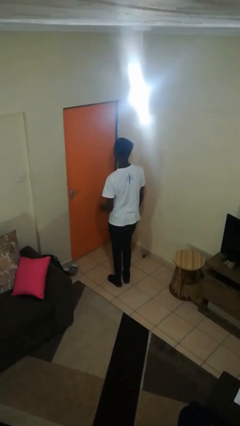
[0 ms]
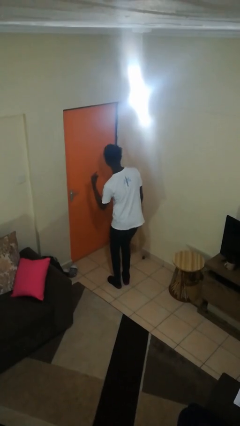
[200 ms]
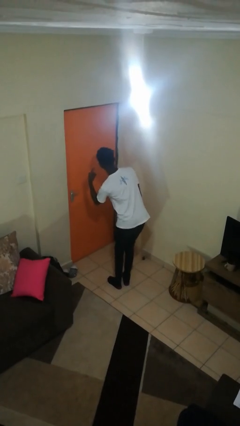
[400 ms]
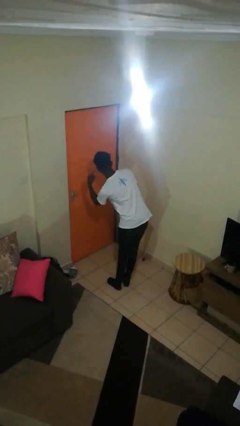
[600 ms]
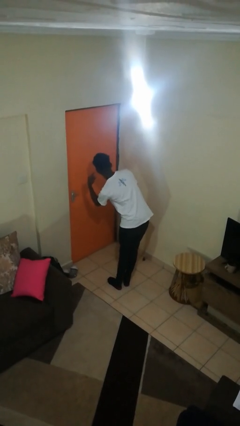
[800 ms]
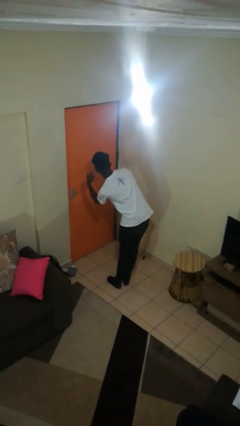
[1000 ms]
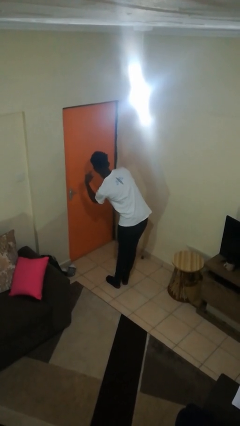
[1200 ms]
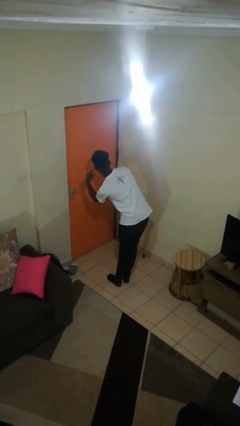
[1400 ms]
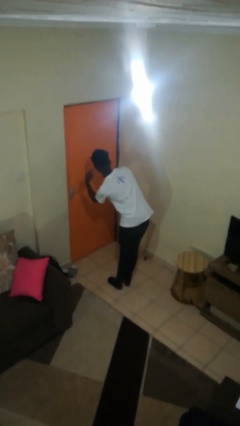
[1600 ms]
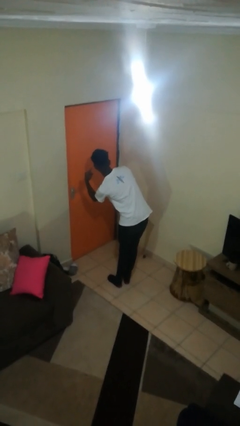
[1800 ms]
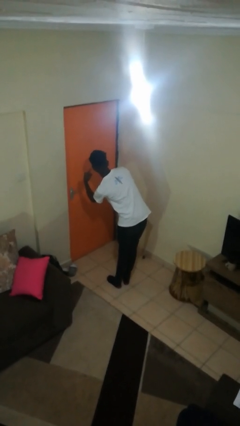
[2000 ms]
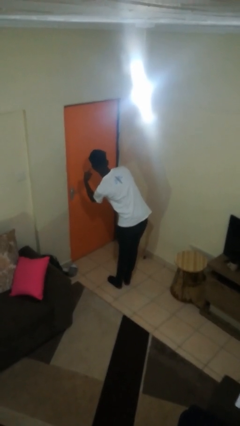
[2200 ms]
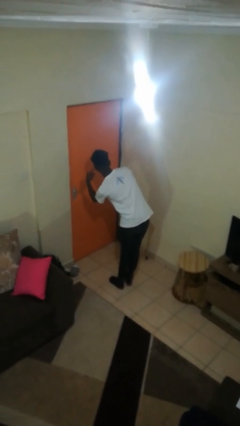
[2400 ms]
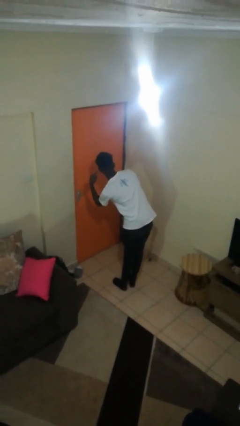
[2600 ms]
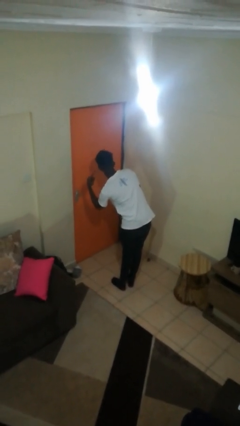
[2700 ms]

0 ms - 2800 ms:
person gestures listen closely

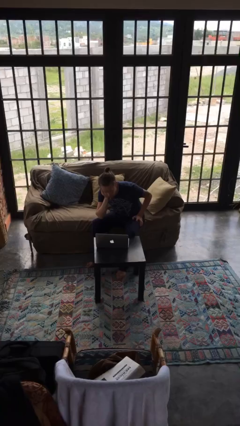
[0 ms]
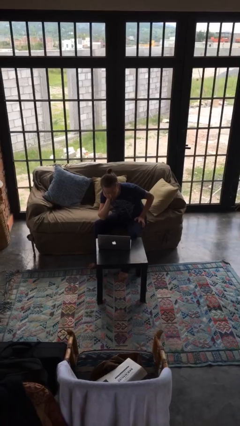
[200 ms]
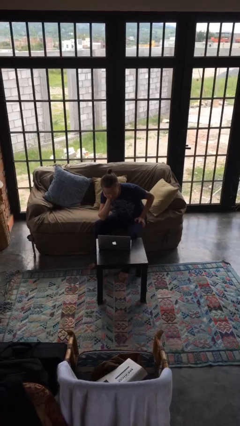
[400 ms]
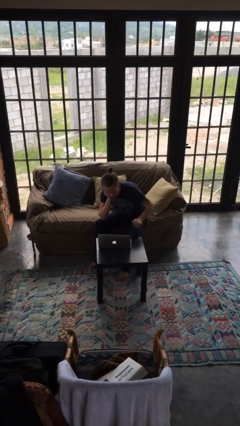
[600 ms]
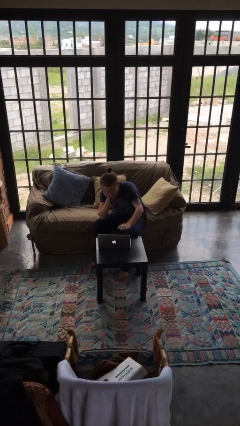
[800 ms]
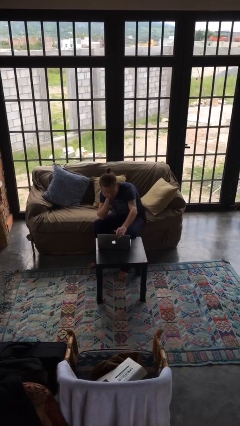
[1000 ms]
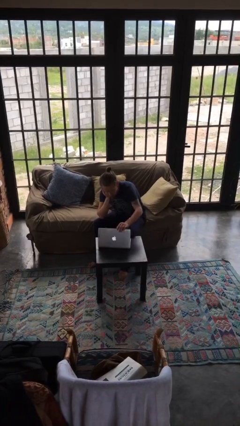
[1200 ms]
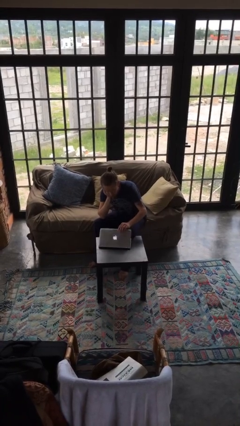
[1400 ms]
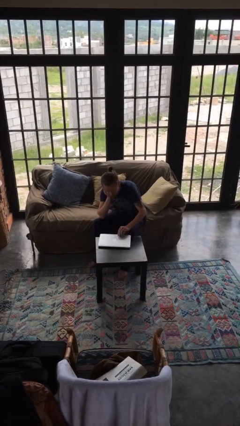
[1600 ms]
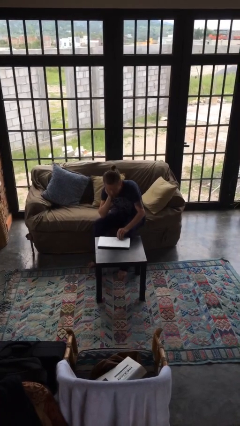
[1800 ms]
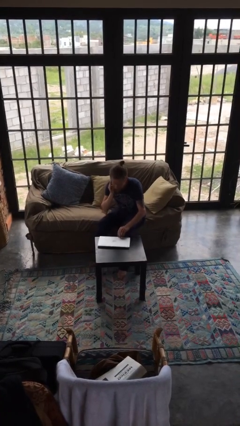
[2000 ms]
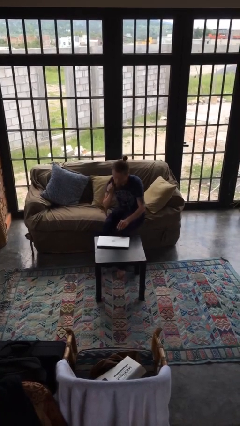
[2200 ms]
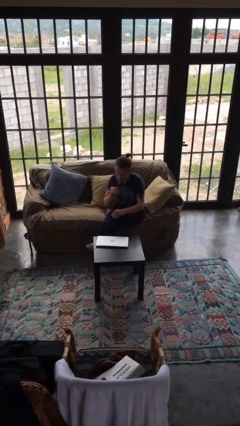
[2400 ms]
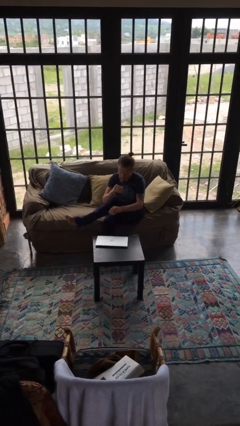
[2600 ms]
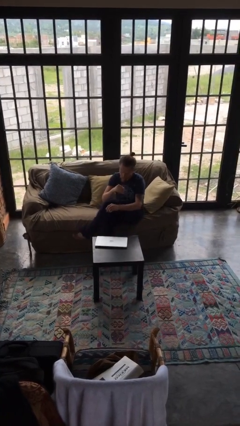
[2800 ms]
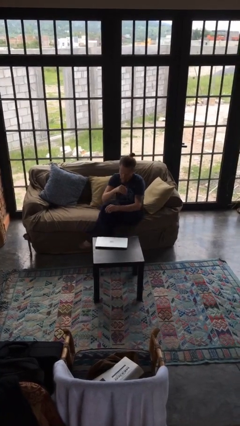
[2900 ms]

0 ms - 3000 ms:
person closes laptop

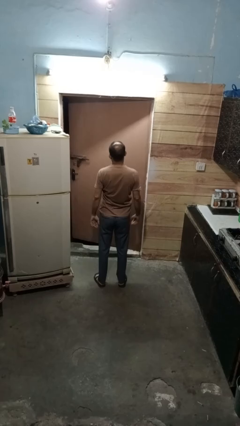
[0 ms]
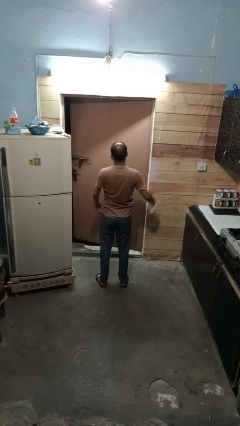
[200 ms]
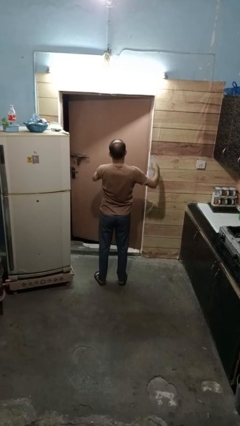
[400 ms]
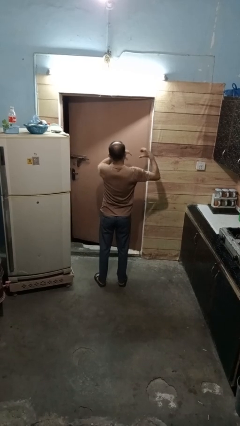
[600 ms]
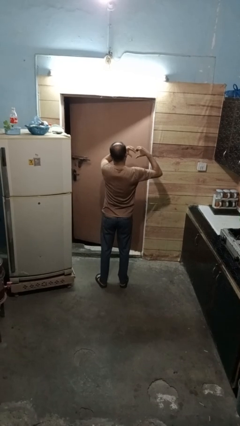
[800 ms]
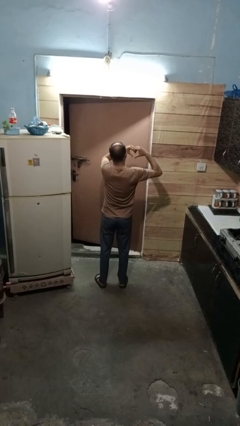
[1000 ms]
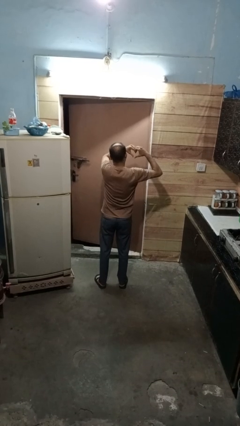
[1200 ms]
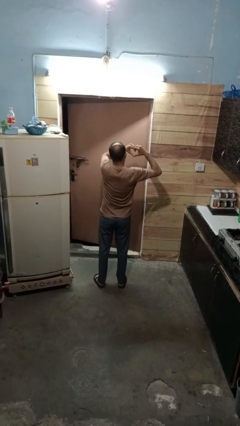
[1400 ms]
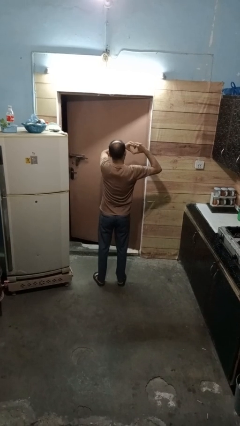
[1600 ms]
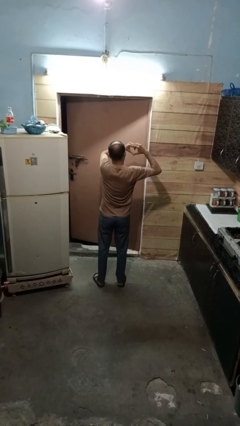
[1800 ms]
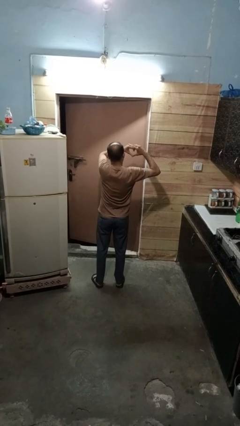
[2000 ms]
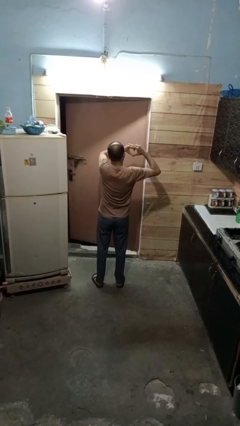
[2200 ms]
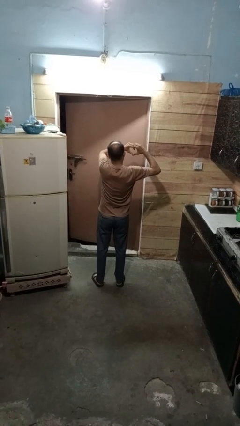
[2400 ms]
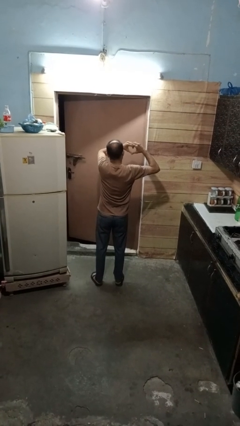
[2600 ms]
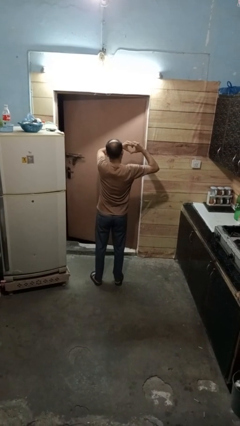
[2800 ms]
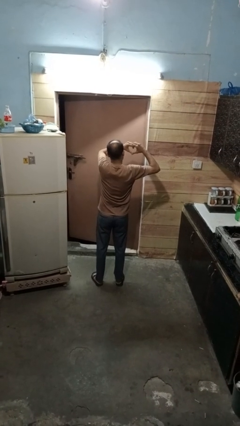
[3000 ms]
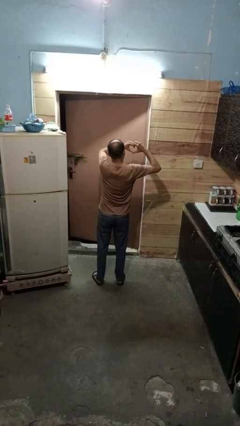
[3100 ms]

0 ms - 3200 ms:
person gestures heart

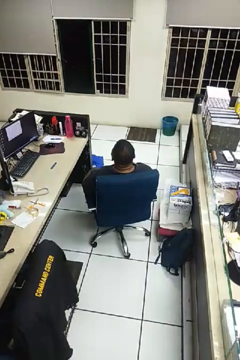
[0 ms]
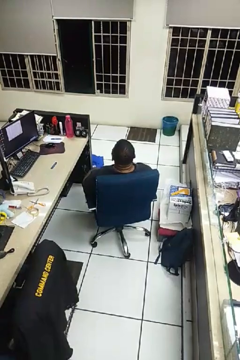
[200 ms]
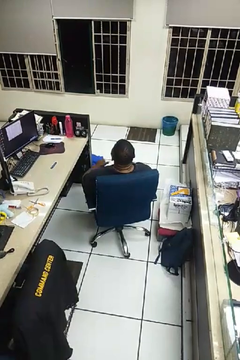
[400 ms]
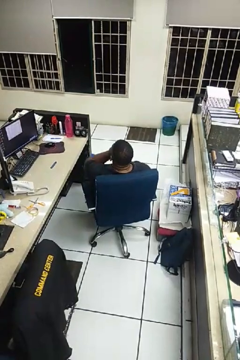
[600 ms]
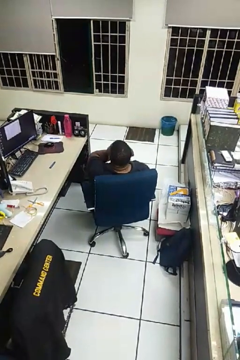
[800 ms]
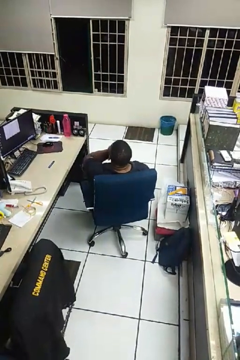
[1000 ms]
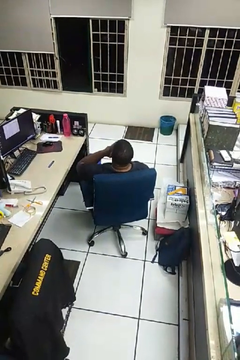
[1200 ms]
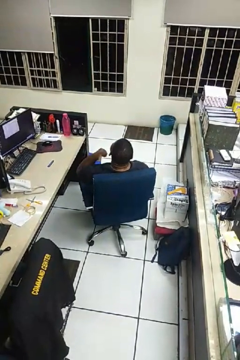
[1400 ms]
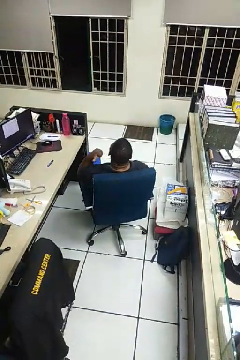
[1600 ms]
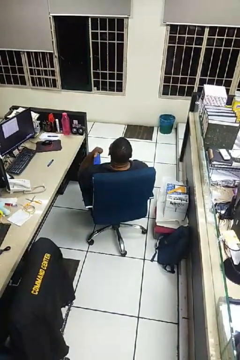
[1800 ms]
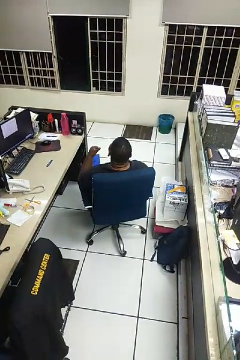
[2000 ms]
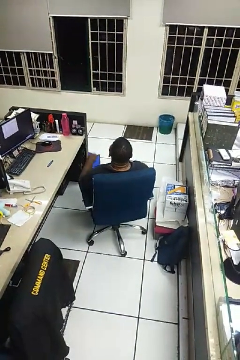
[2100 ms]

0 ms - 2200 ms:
person gestures cut

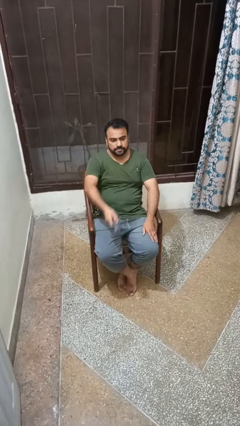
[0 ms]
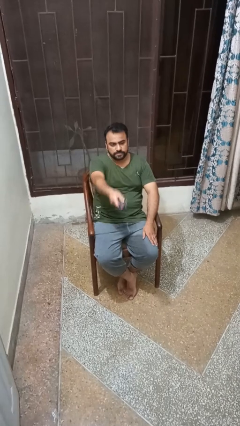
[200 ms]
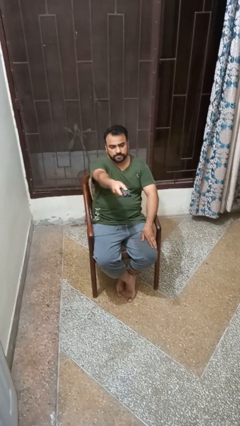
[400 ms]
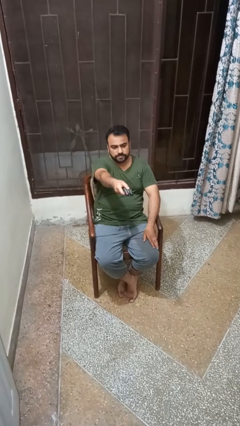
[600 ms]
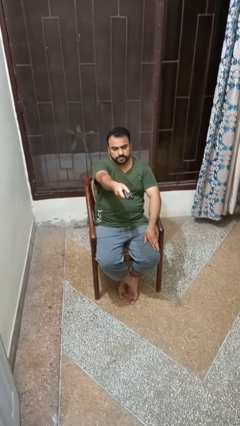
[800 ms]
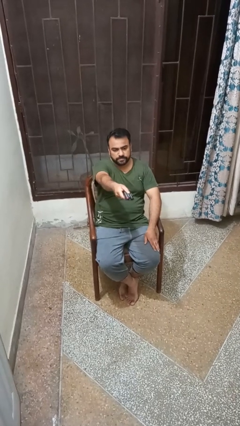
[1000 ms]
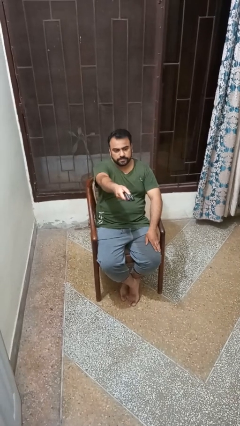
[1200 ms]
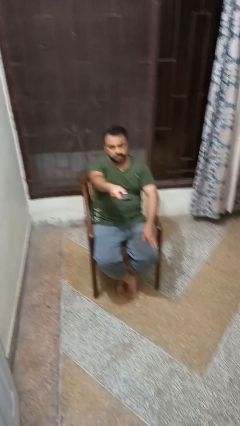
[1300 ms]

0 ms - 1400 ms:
person uses television remote

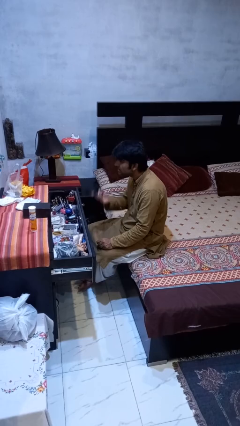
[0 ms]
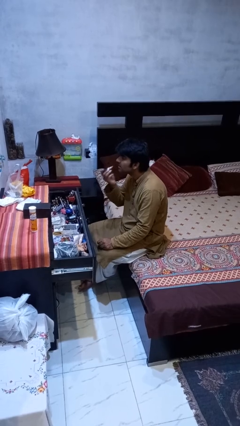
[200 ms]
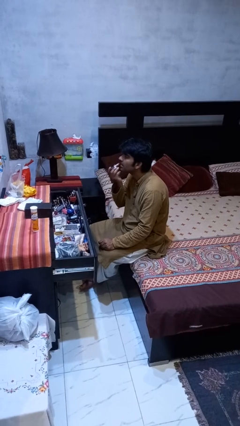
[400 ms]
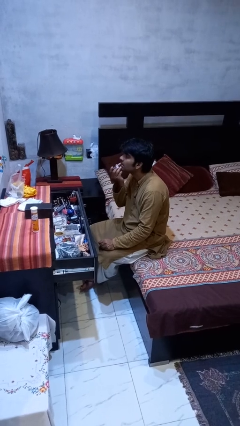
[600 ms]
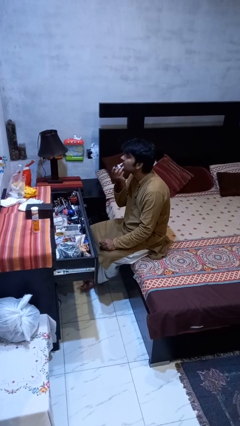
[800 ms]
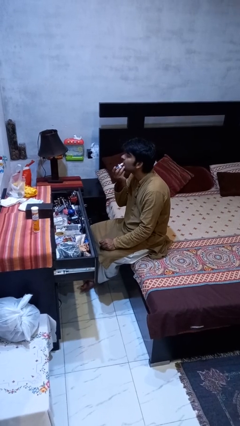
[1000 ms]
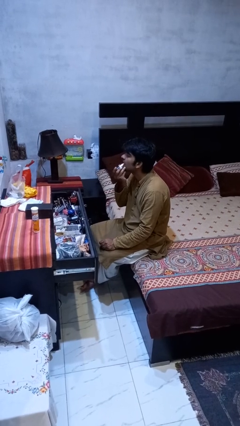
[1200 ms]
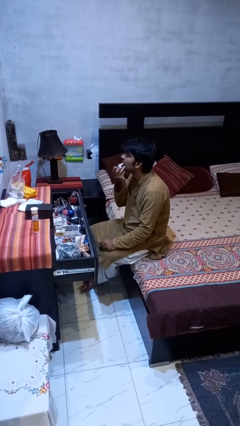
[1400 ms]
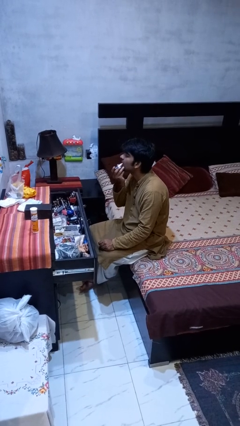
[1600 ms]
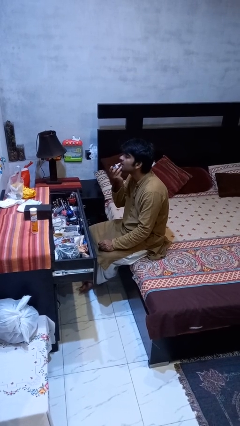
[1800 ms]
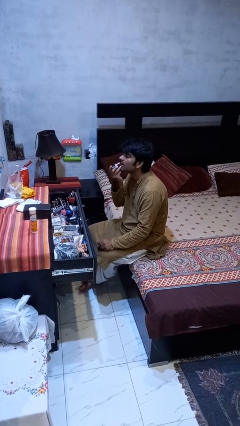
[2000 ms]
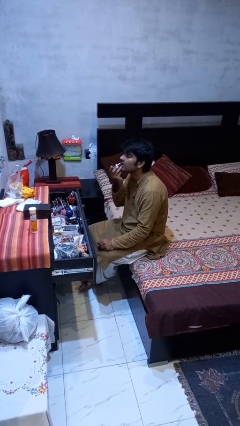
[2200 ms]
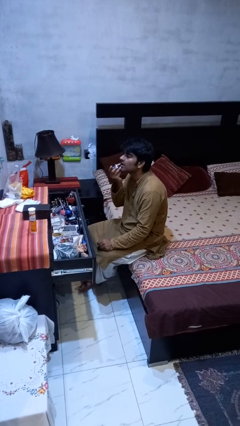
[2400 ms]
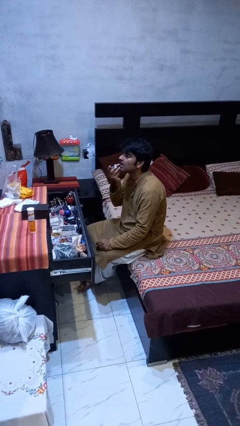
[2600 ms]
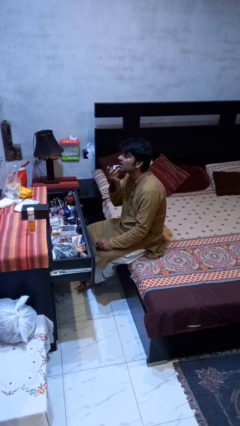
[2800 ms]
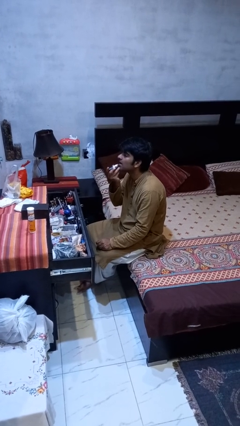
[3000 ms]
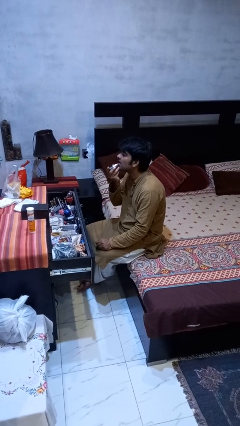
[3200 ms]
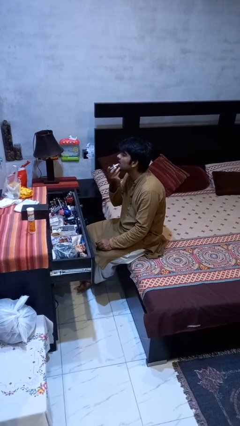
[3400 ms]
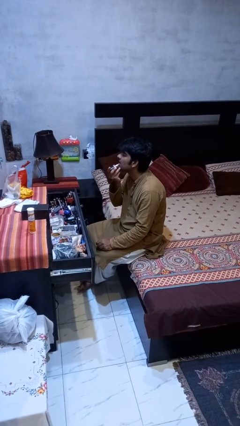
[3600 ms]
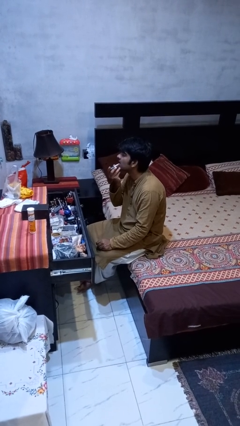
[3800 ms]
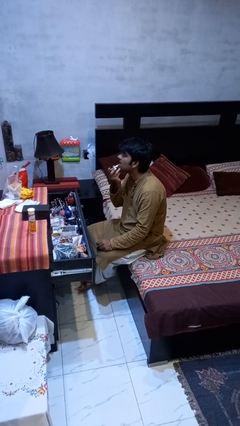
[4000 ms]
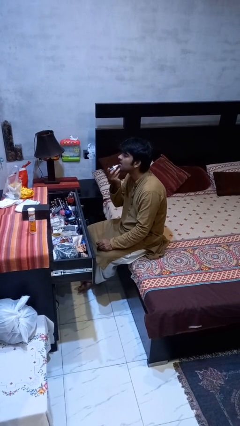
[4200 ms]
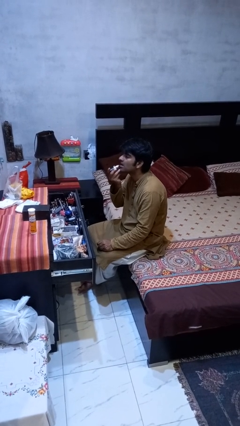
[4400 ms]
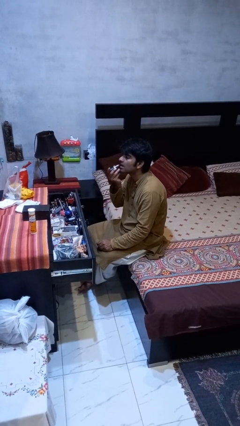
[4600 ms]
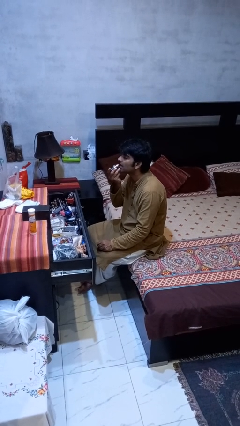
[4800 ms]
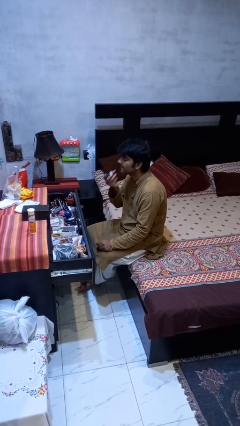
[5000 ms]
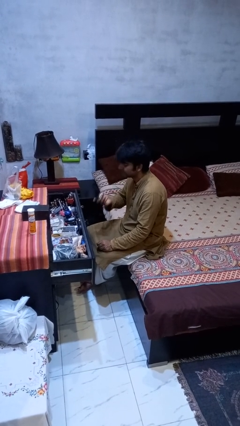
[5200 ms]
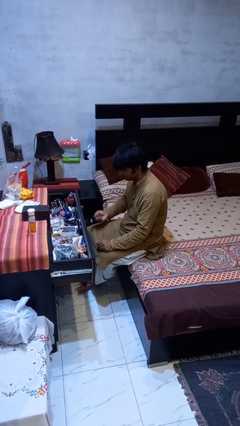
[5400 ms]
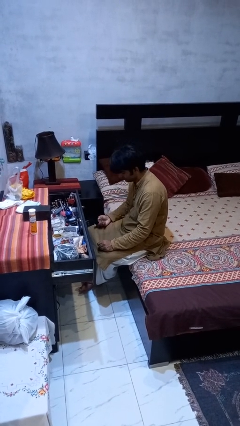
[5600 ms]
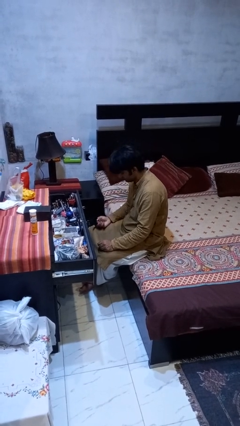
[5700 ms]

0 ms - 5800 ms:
person applies lip makeup
